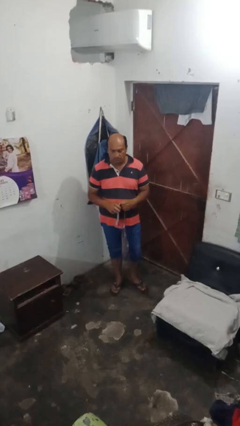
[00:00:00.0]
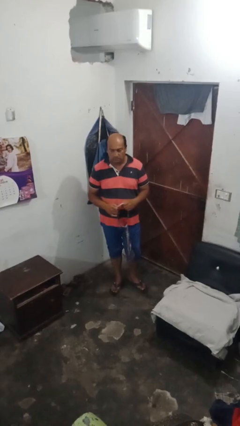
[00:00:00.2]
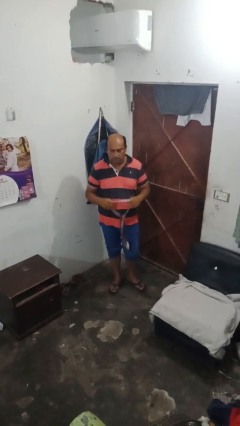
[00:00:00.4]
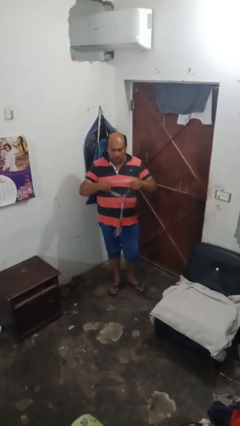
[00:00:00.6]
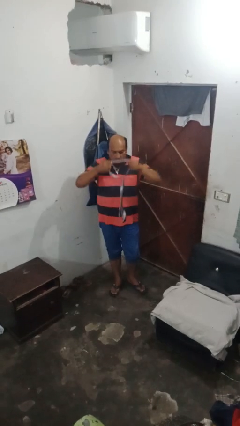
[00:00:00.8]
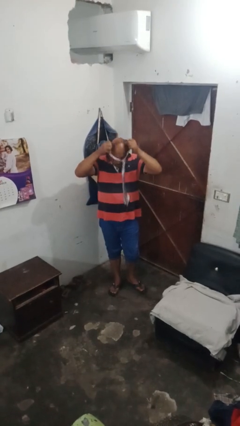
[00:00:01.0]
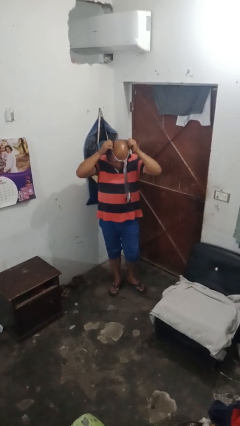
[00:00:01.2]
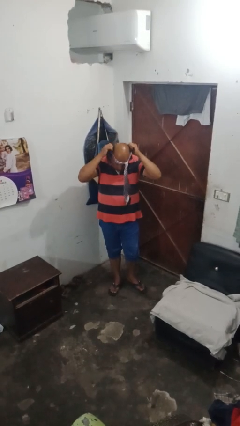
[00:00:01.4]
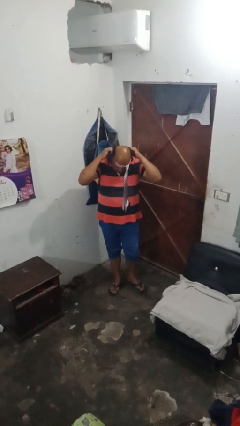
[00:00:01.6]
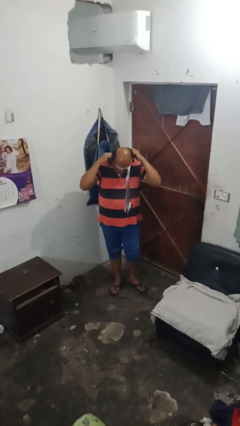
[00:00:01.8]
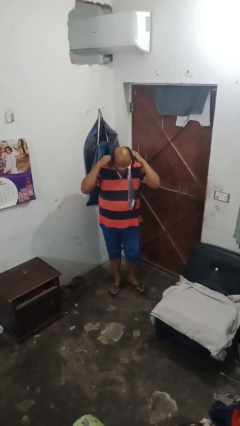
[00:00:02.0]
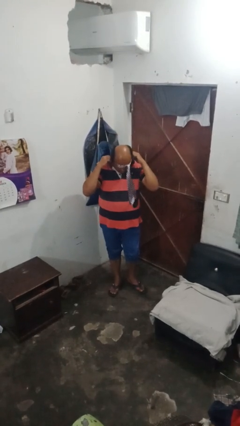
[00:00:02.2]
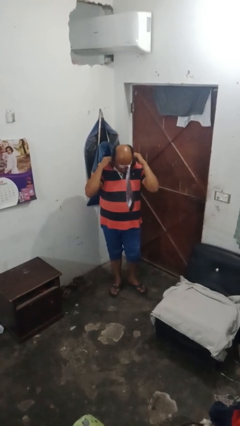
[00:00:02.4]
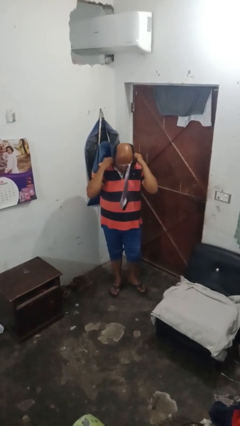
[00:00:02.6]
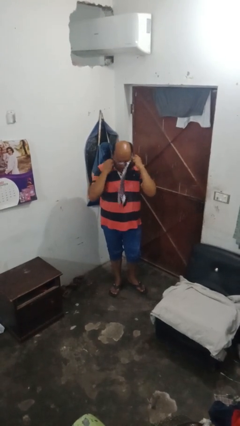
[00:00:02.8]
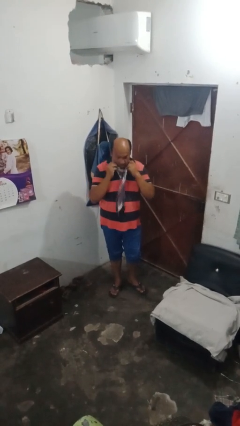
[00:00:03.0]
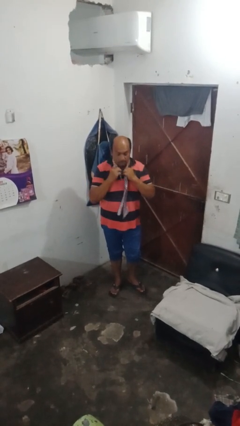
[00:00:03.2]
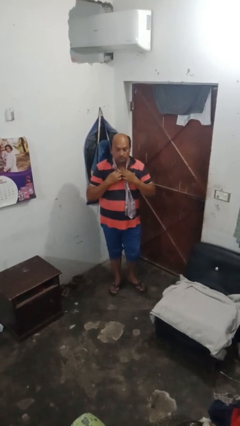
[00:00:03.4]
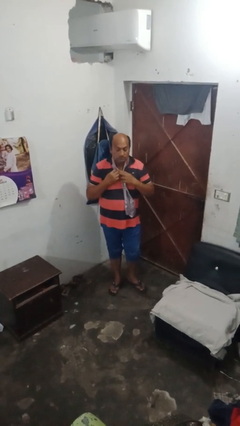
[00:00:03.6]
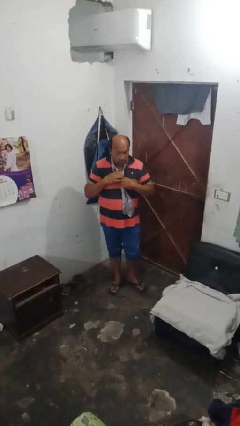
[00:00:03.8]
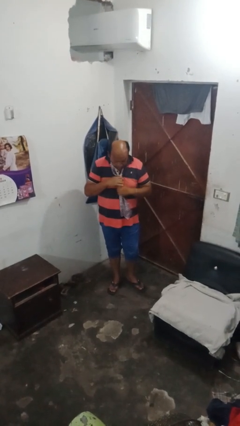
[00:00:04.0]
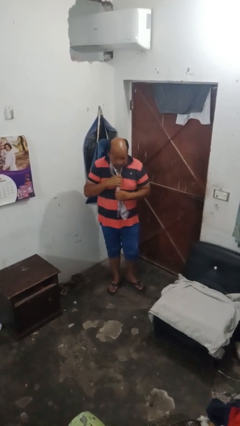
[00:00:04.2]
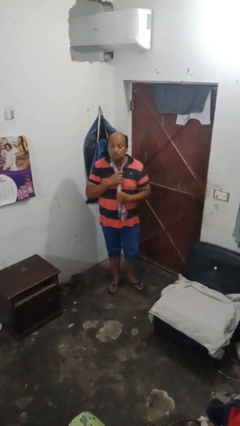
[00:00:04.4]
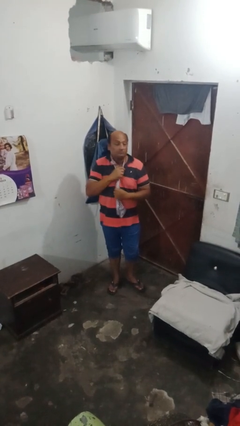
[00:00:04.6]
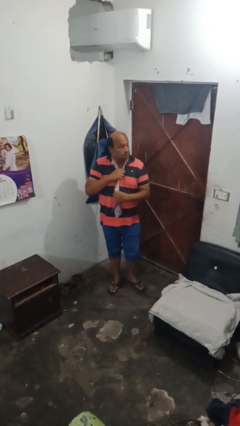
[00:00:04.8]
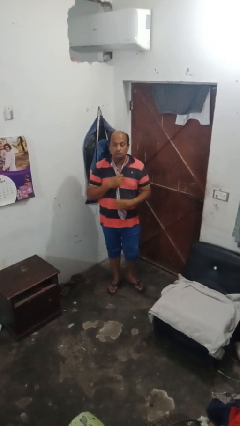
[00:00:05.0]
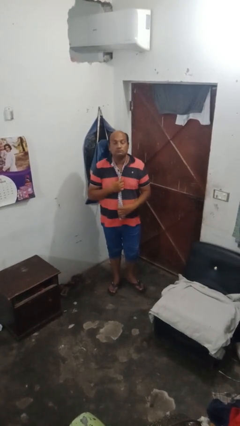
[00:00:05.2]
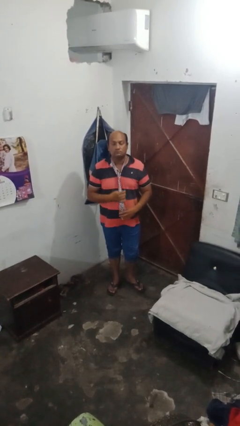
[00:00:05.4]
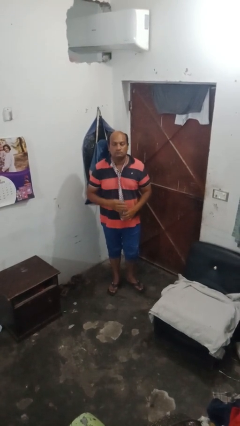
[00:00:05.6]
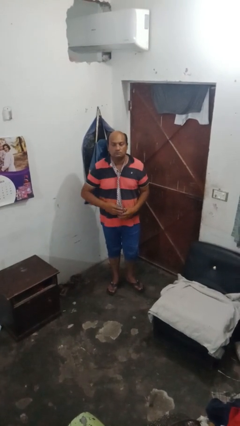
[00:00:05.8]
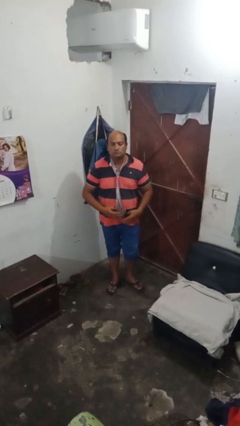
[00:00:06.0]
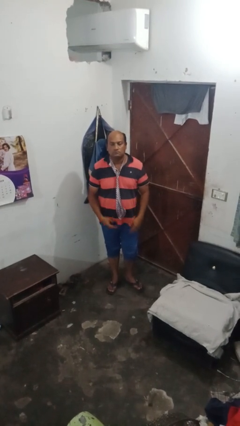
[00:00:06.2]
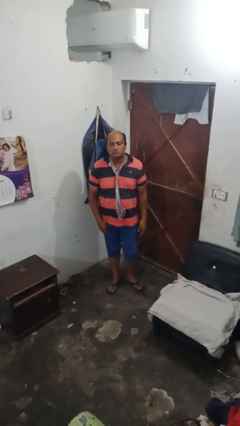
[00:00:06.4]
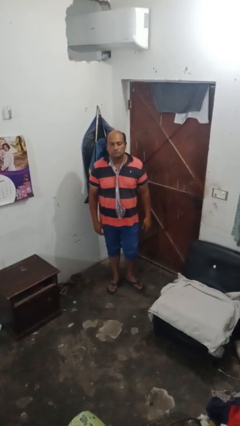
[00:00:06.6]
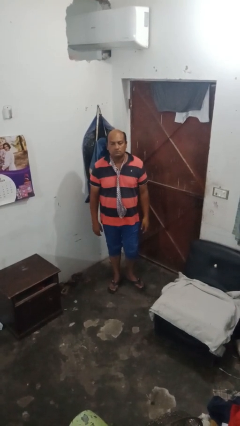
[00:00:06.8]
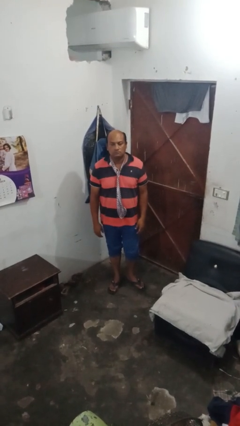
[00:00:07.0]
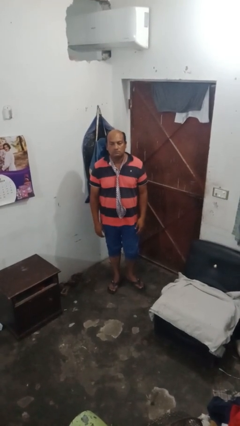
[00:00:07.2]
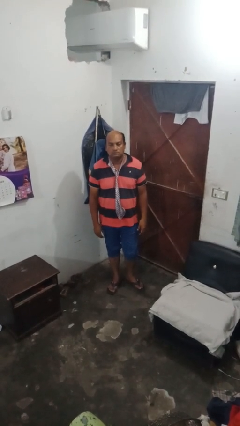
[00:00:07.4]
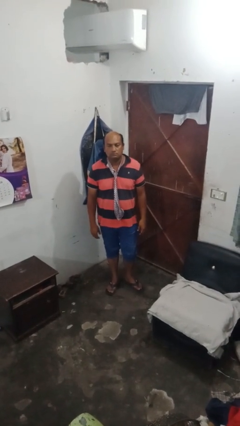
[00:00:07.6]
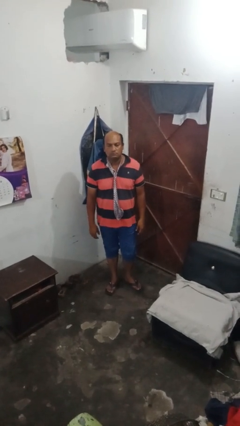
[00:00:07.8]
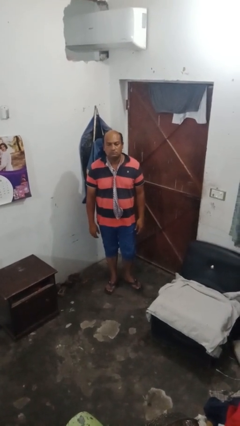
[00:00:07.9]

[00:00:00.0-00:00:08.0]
person puts on necktie

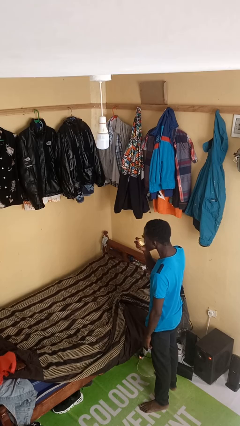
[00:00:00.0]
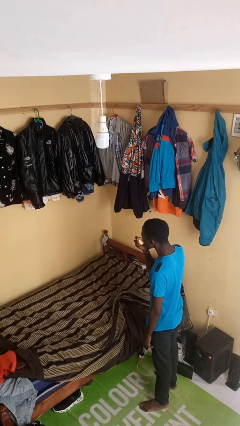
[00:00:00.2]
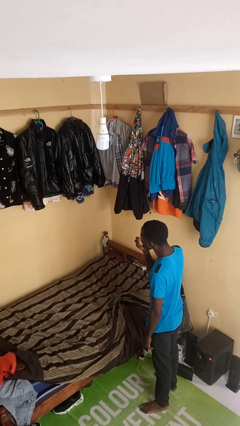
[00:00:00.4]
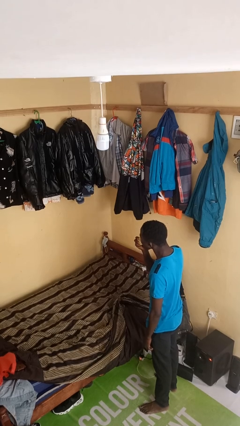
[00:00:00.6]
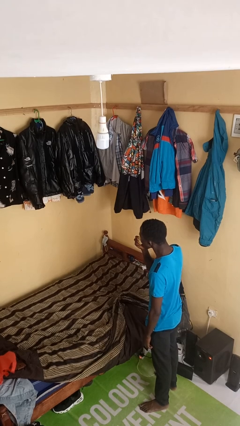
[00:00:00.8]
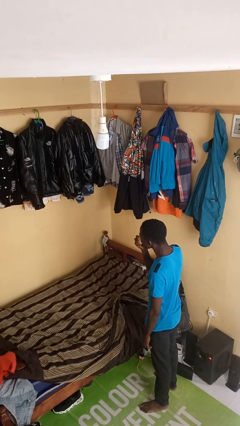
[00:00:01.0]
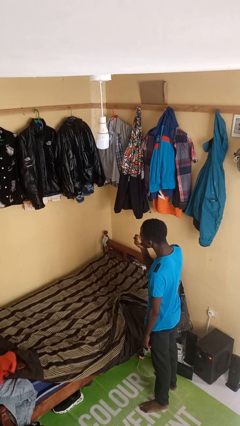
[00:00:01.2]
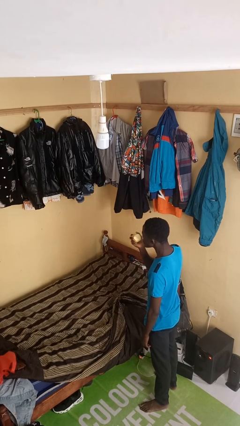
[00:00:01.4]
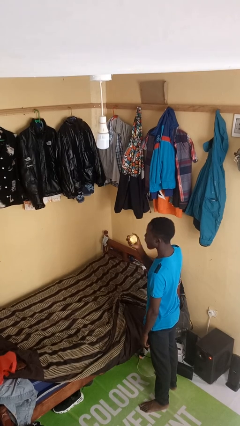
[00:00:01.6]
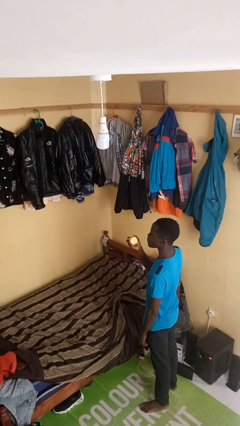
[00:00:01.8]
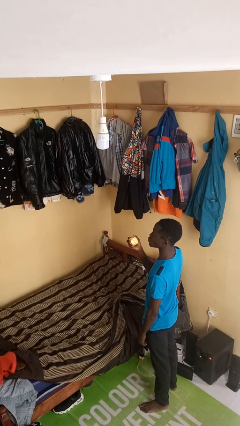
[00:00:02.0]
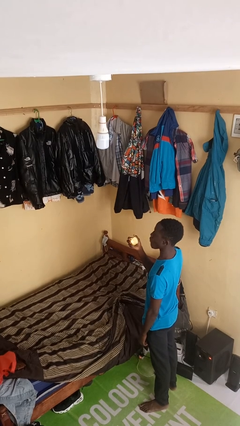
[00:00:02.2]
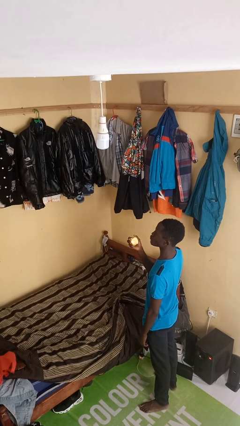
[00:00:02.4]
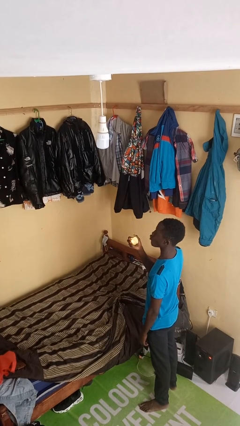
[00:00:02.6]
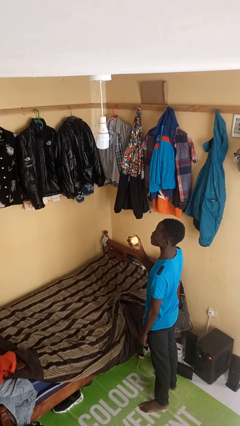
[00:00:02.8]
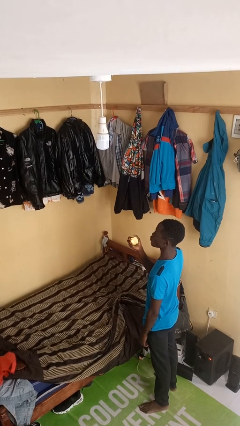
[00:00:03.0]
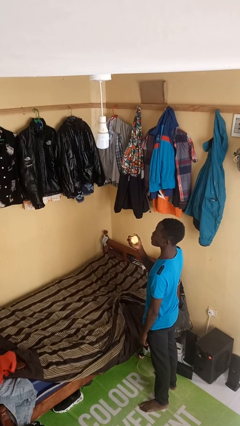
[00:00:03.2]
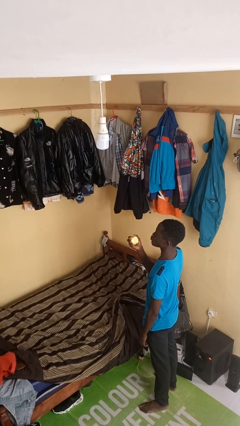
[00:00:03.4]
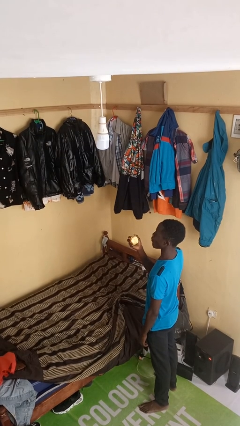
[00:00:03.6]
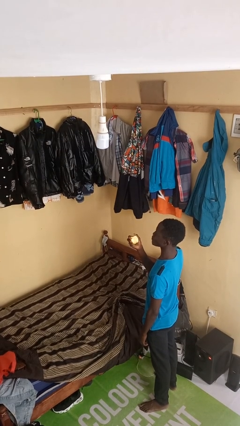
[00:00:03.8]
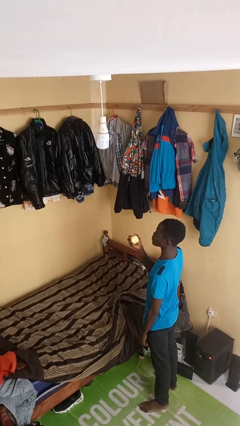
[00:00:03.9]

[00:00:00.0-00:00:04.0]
person eats apple

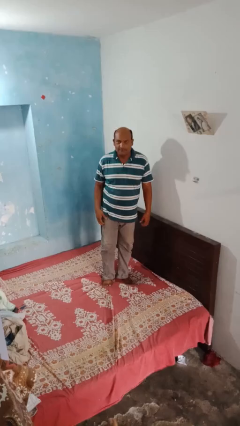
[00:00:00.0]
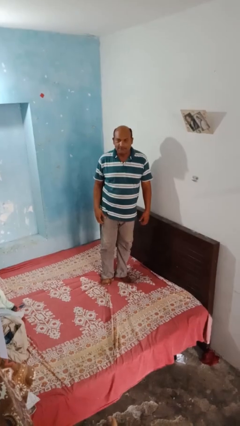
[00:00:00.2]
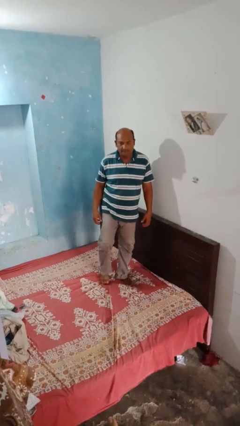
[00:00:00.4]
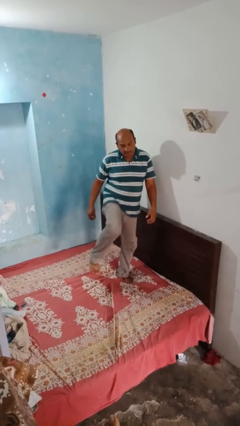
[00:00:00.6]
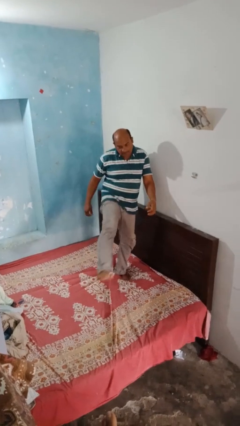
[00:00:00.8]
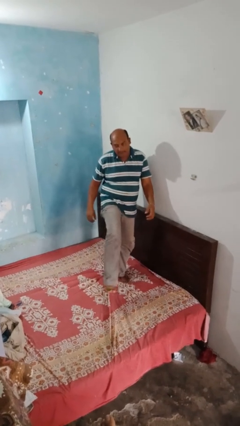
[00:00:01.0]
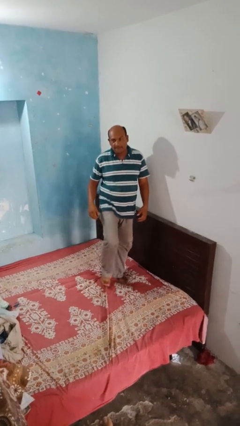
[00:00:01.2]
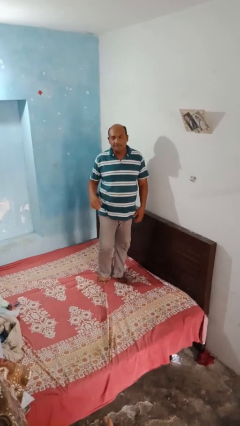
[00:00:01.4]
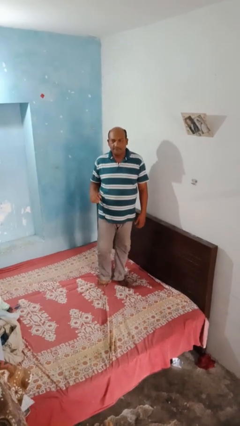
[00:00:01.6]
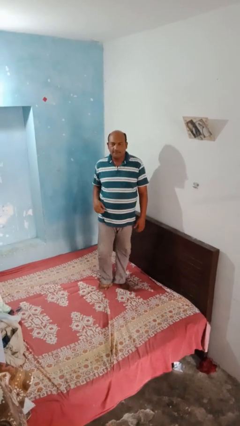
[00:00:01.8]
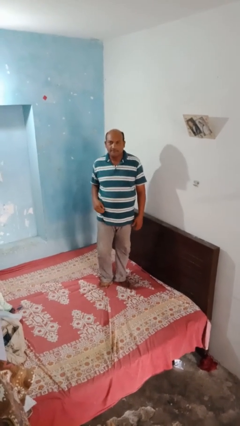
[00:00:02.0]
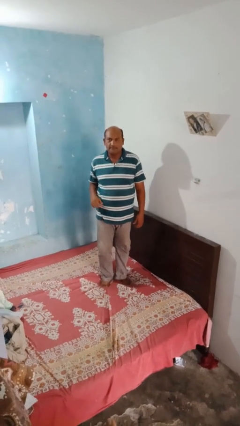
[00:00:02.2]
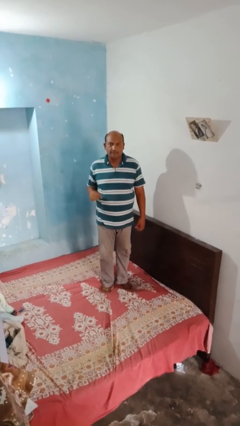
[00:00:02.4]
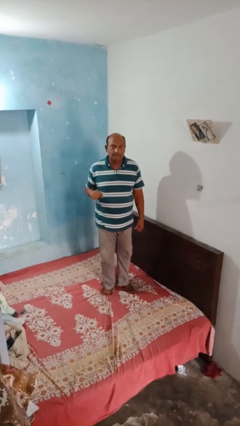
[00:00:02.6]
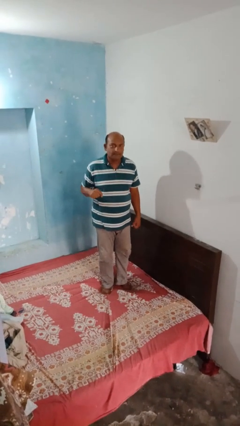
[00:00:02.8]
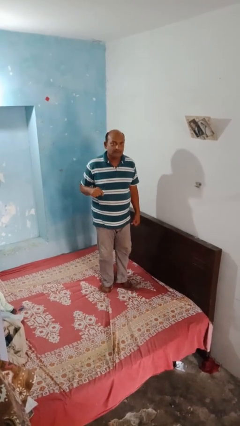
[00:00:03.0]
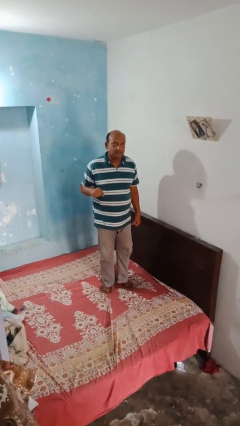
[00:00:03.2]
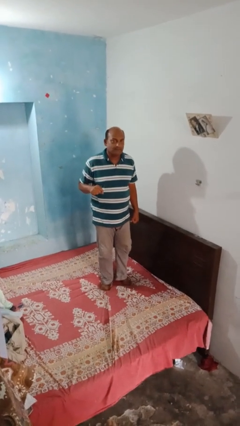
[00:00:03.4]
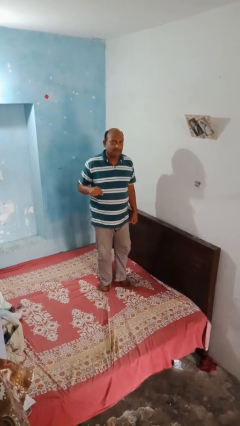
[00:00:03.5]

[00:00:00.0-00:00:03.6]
person karate kicks

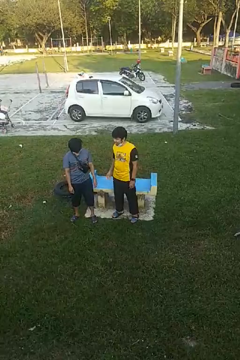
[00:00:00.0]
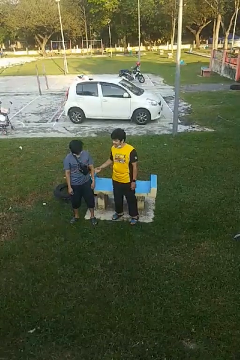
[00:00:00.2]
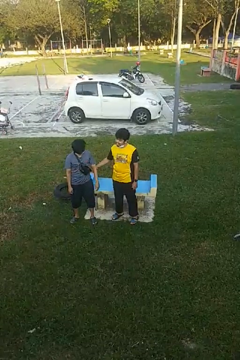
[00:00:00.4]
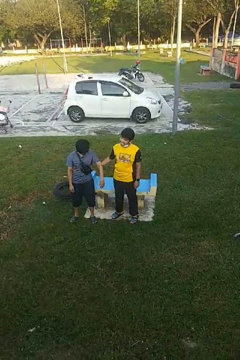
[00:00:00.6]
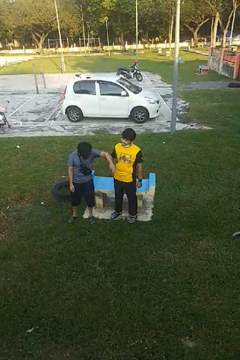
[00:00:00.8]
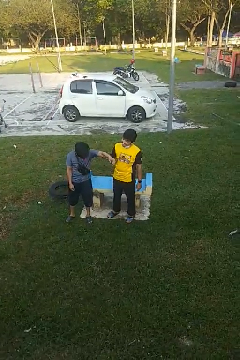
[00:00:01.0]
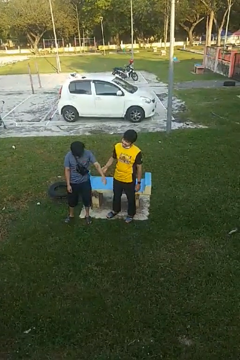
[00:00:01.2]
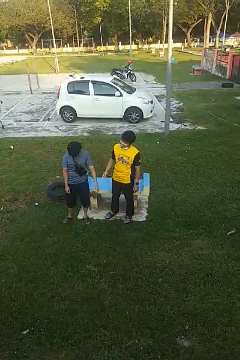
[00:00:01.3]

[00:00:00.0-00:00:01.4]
person grabs person by bicep

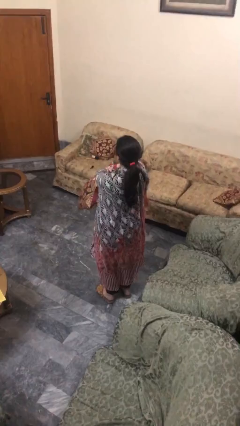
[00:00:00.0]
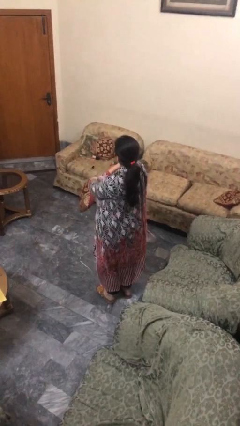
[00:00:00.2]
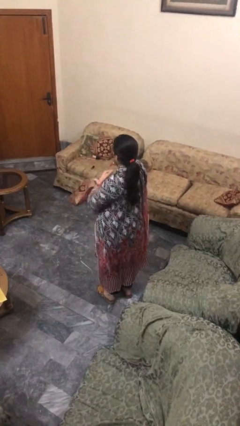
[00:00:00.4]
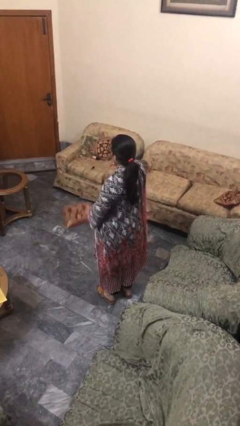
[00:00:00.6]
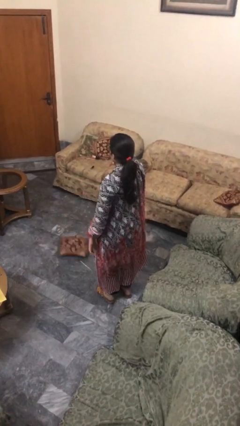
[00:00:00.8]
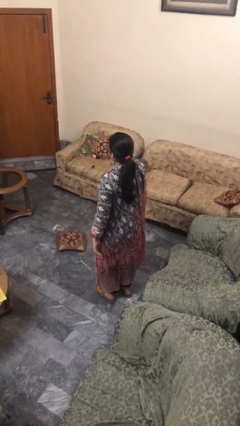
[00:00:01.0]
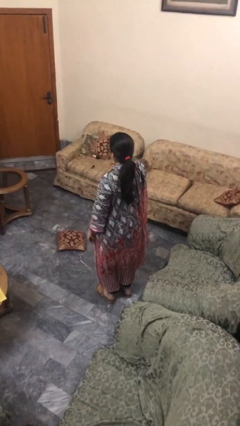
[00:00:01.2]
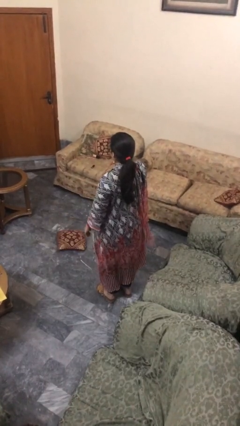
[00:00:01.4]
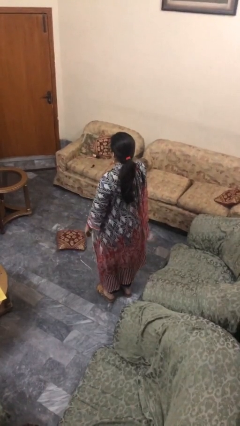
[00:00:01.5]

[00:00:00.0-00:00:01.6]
person throws object to ground
